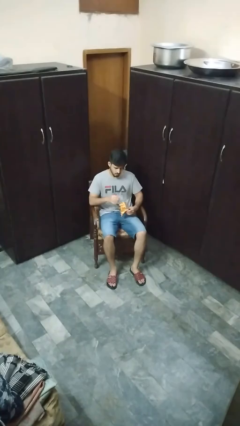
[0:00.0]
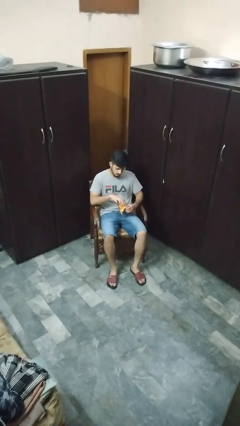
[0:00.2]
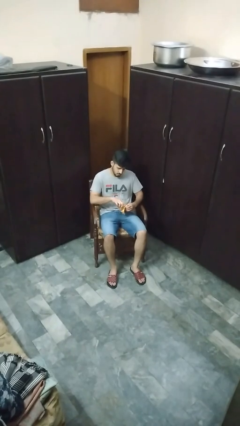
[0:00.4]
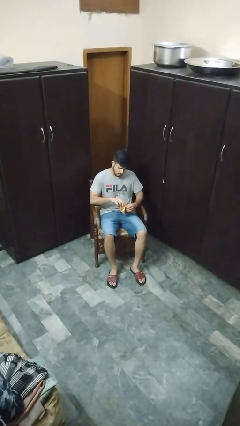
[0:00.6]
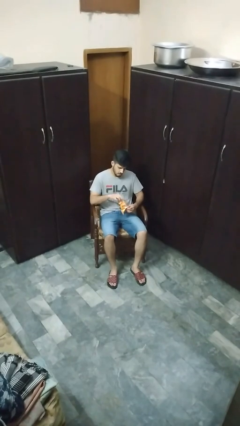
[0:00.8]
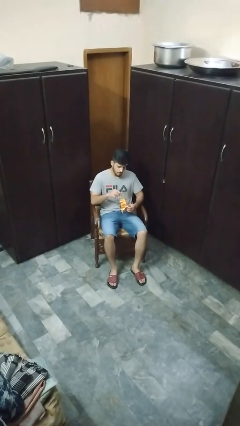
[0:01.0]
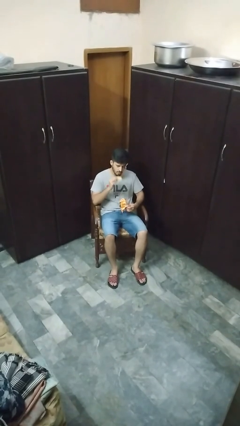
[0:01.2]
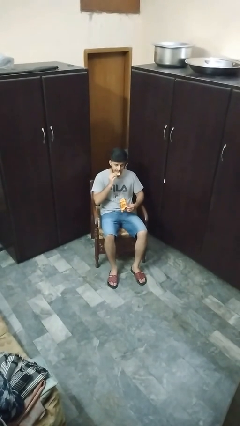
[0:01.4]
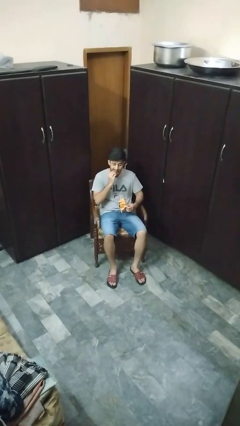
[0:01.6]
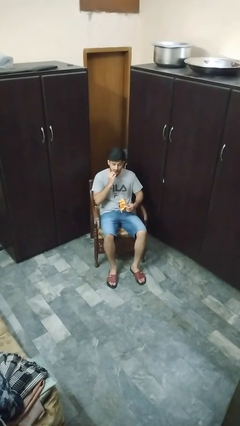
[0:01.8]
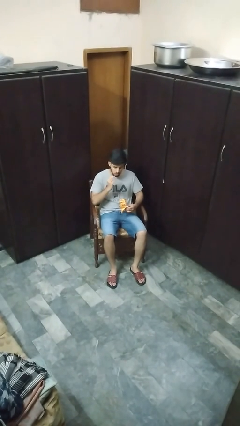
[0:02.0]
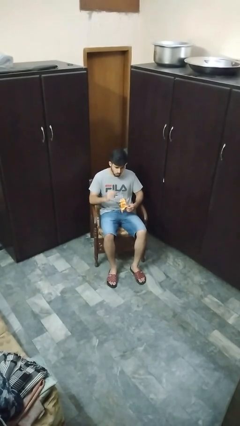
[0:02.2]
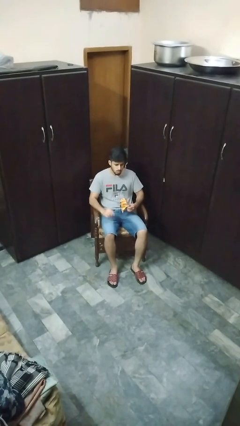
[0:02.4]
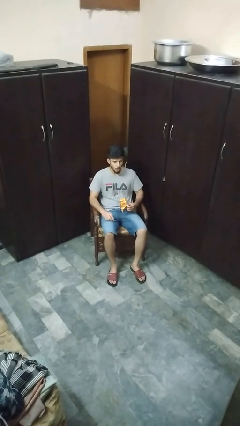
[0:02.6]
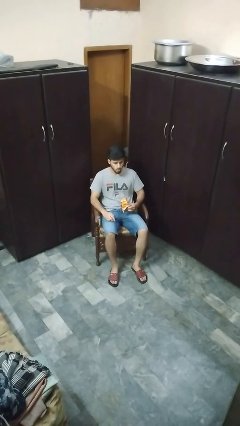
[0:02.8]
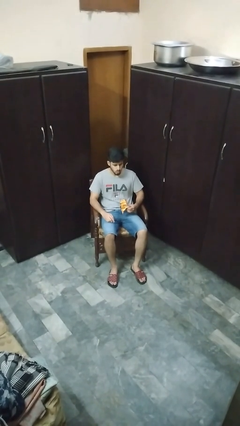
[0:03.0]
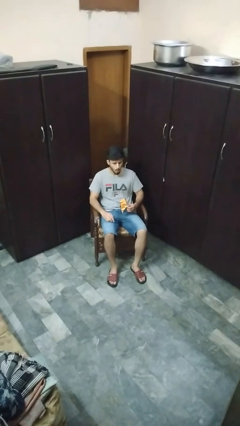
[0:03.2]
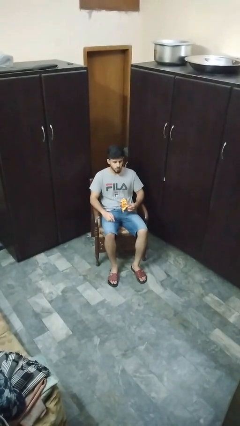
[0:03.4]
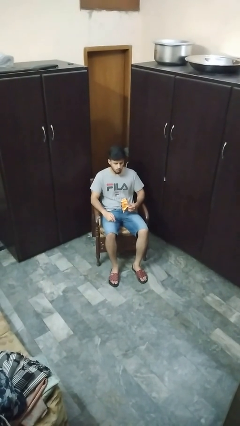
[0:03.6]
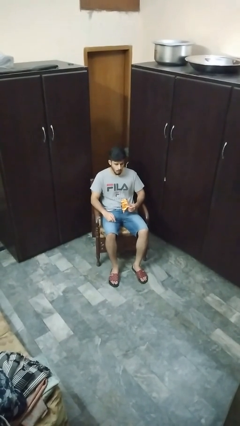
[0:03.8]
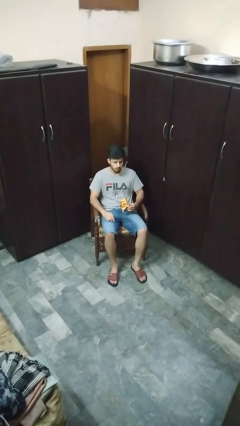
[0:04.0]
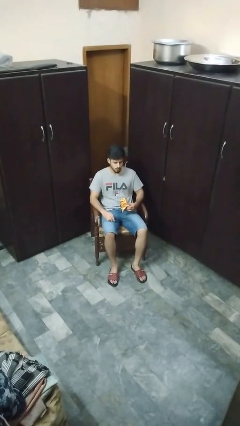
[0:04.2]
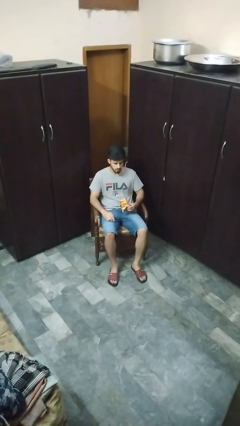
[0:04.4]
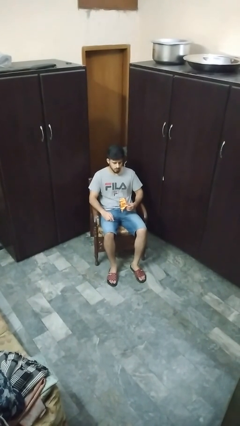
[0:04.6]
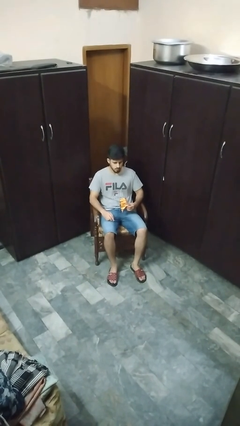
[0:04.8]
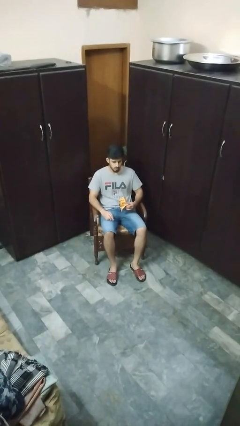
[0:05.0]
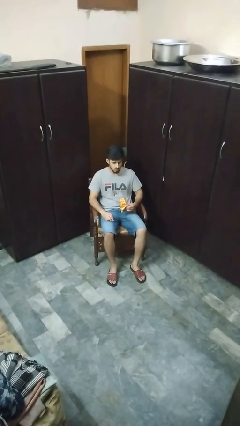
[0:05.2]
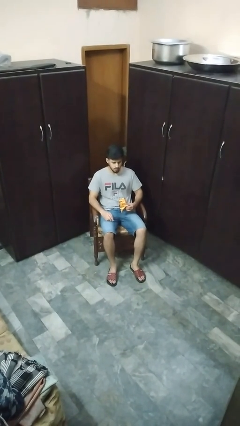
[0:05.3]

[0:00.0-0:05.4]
person eats snack from bag

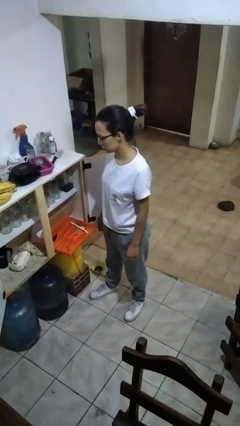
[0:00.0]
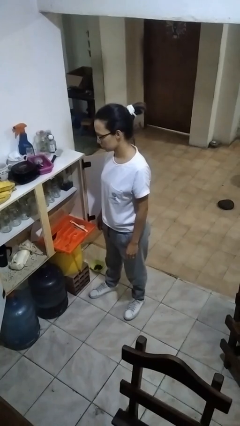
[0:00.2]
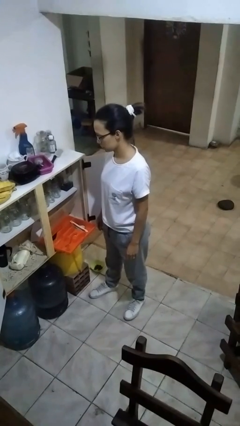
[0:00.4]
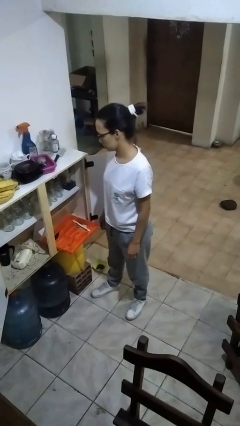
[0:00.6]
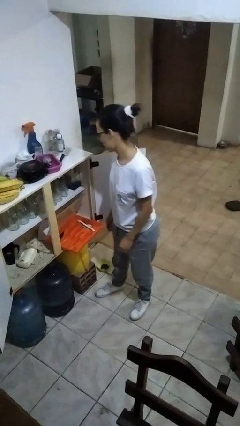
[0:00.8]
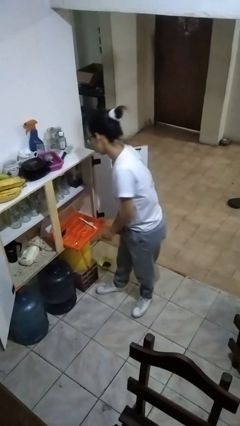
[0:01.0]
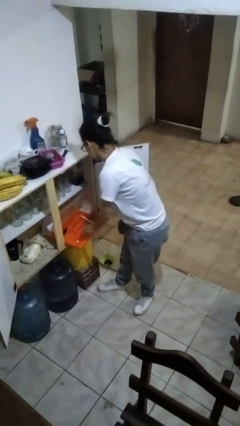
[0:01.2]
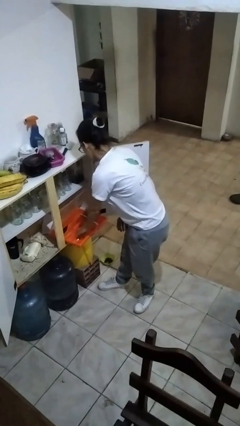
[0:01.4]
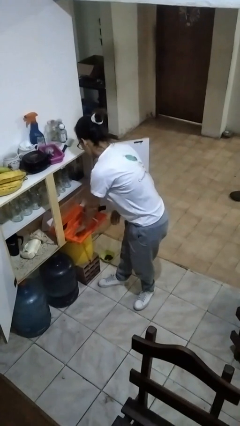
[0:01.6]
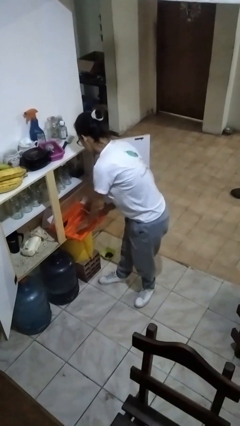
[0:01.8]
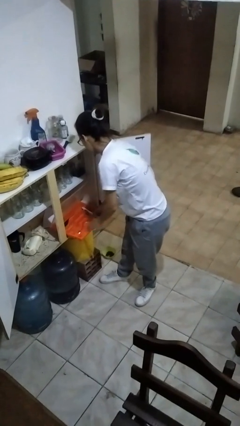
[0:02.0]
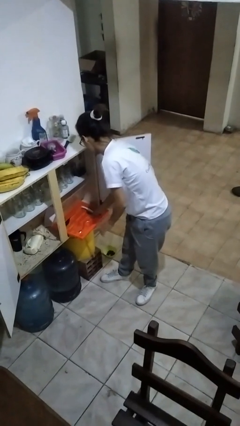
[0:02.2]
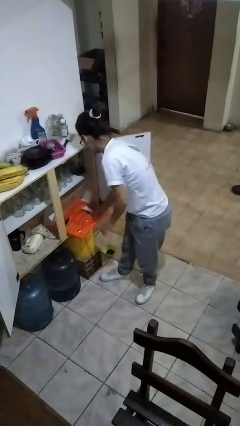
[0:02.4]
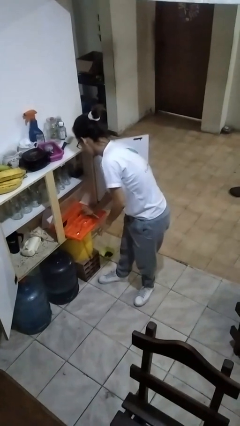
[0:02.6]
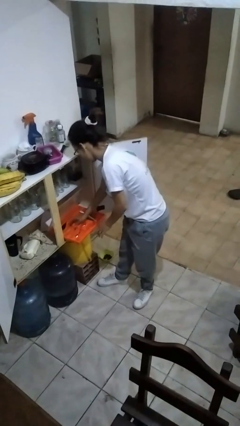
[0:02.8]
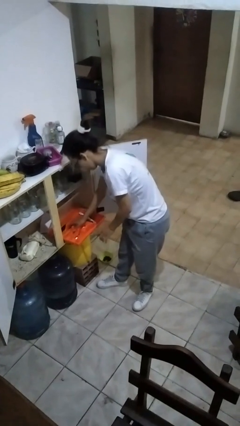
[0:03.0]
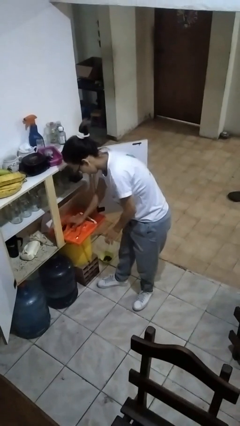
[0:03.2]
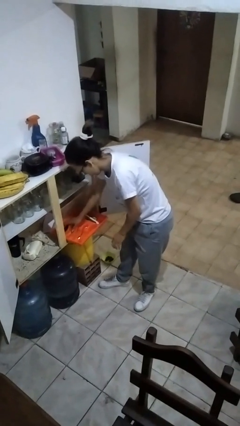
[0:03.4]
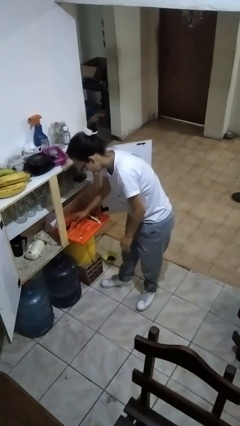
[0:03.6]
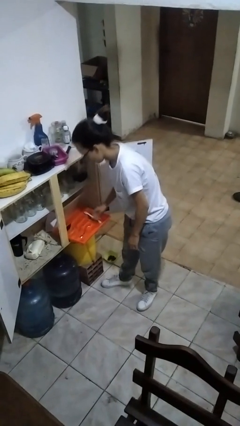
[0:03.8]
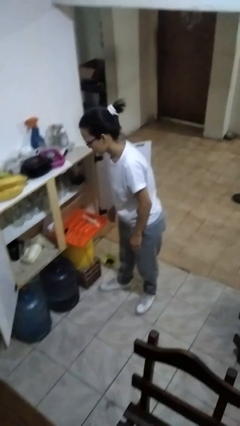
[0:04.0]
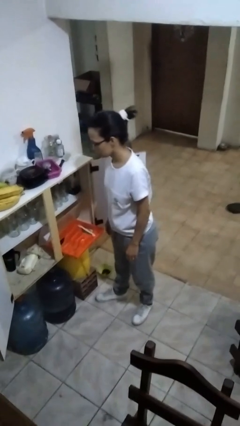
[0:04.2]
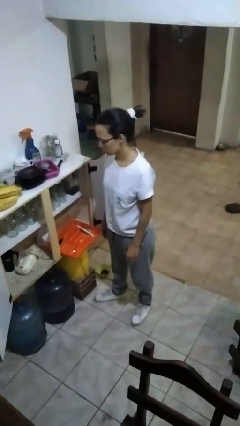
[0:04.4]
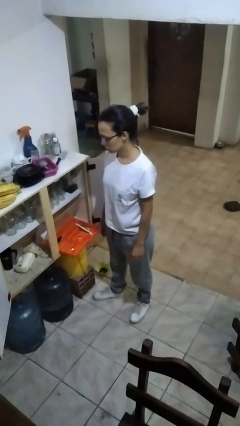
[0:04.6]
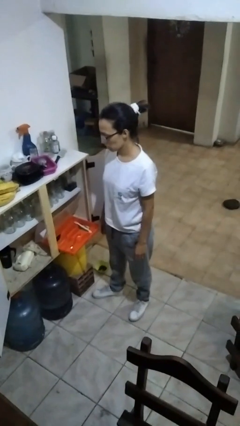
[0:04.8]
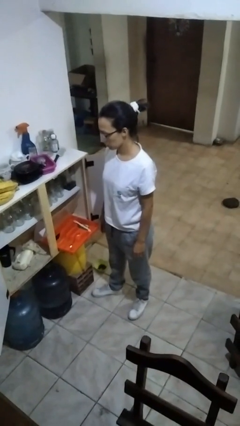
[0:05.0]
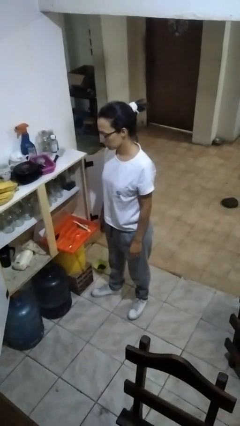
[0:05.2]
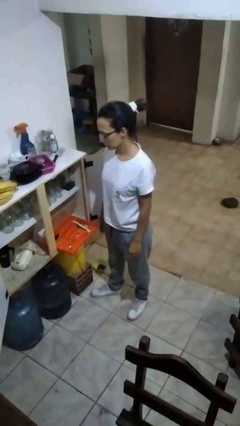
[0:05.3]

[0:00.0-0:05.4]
person searches in kitchen drawer

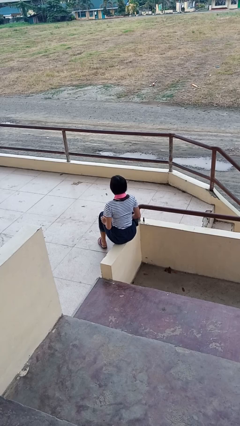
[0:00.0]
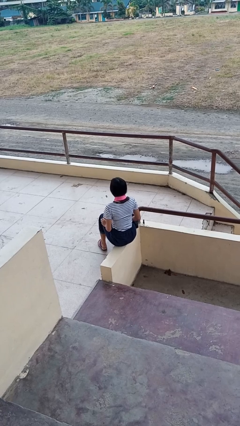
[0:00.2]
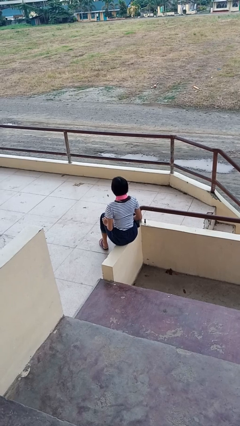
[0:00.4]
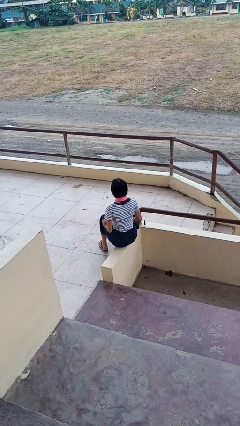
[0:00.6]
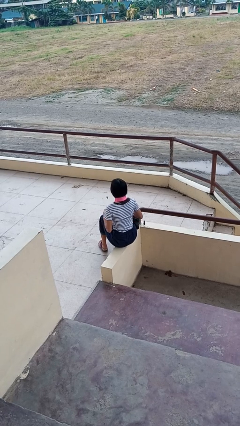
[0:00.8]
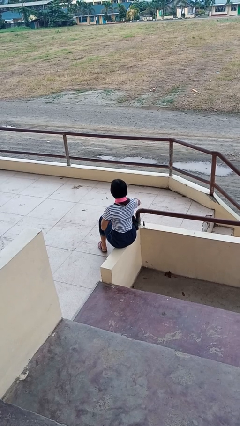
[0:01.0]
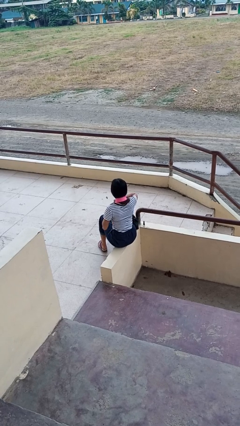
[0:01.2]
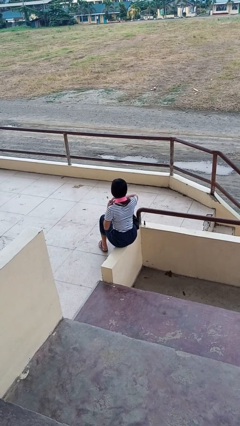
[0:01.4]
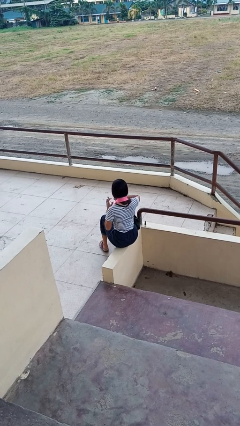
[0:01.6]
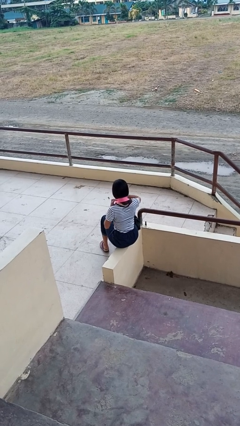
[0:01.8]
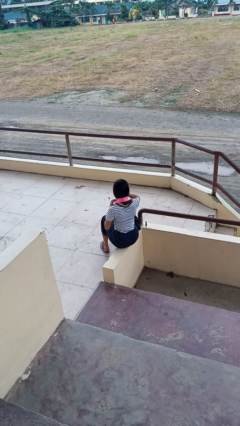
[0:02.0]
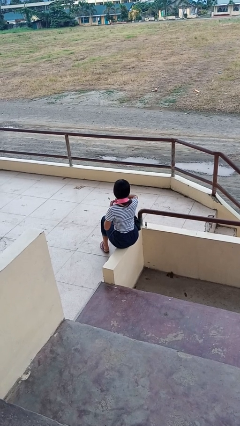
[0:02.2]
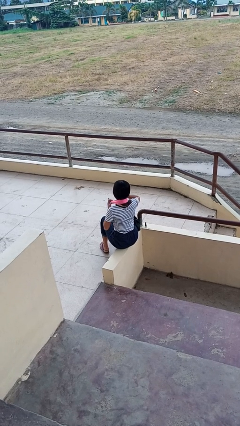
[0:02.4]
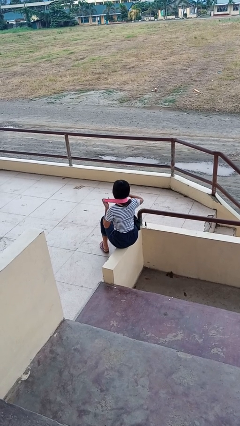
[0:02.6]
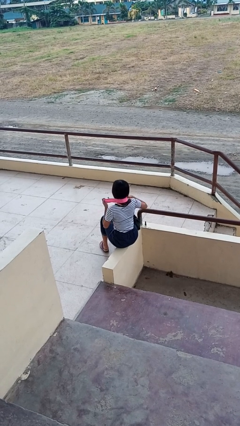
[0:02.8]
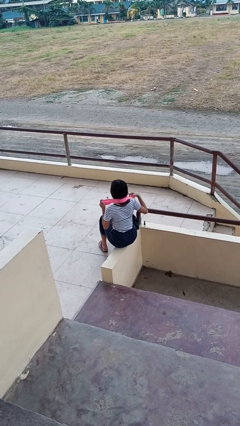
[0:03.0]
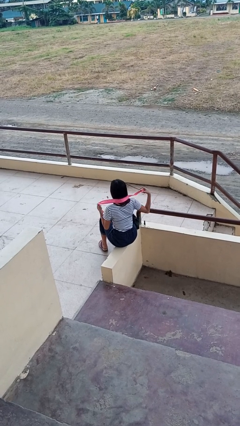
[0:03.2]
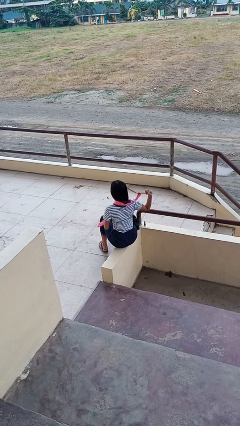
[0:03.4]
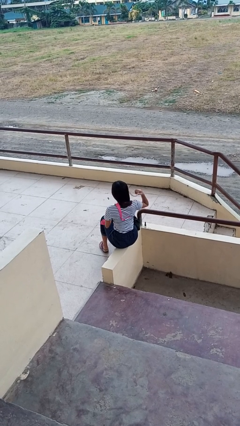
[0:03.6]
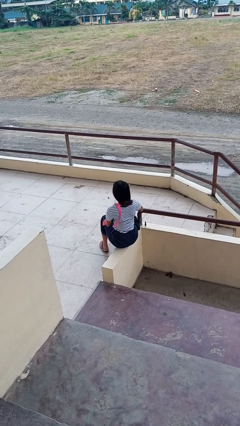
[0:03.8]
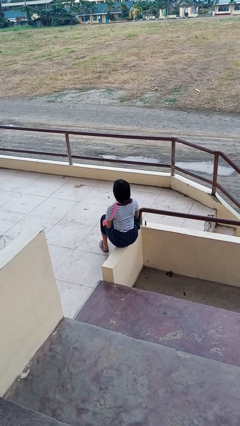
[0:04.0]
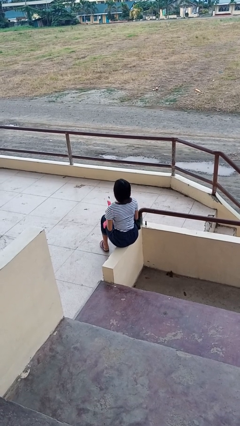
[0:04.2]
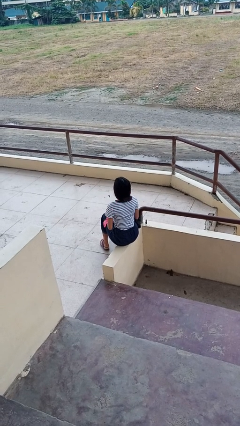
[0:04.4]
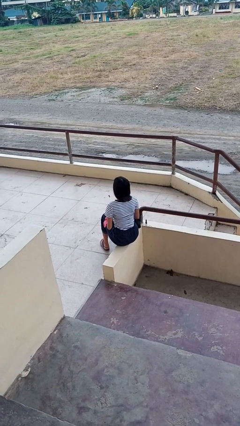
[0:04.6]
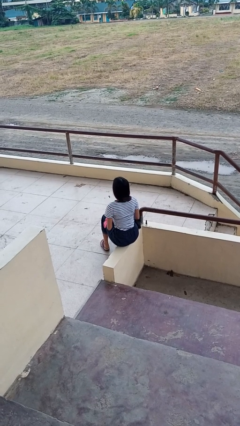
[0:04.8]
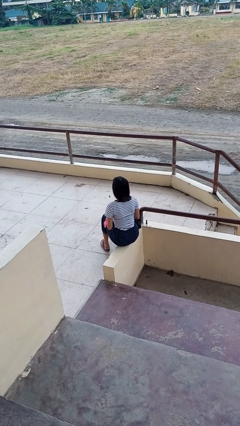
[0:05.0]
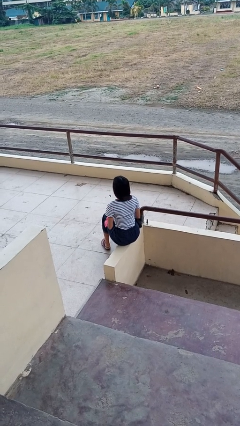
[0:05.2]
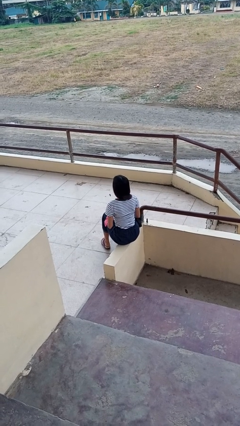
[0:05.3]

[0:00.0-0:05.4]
person takes off necktie

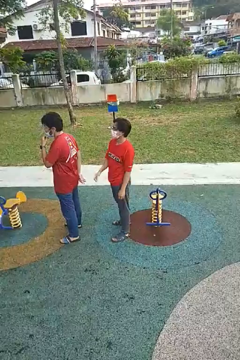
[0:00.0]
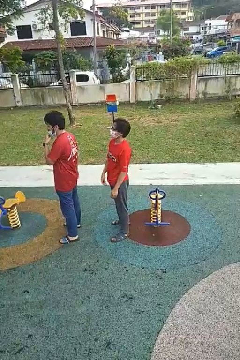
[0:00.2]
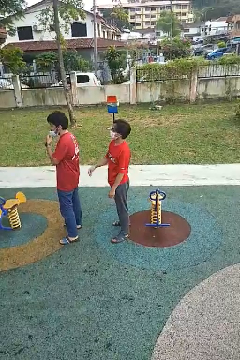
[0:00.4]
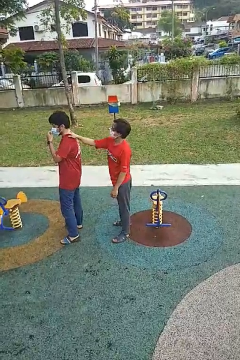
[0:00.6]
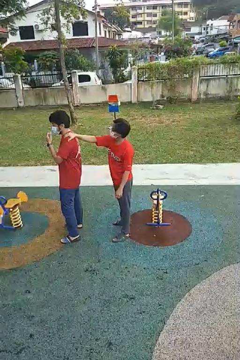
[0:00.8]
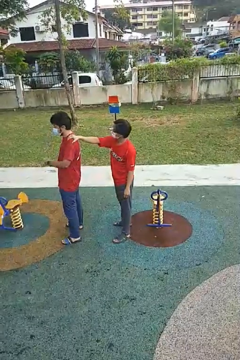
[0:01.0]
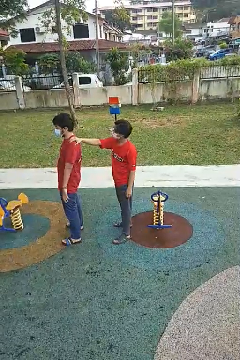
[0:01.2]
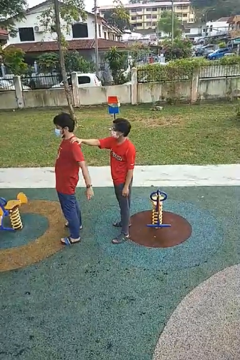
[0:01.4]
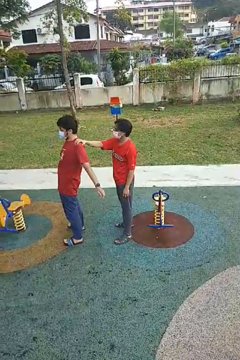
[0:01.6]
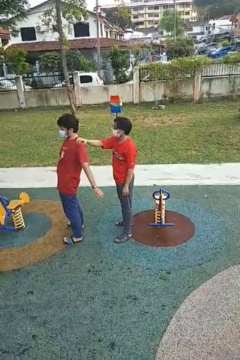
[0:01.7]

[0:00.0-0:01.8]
person grabs person by shoulder
